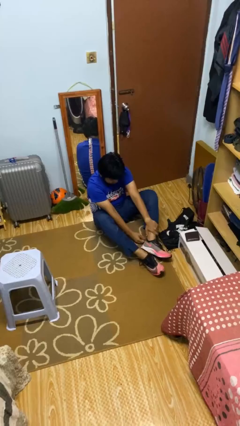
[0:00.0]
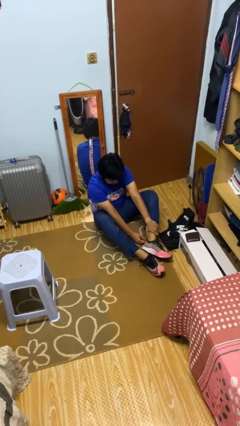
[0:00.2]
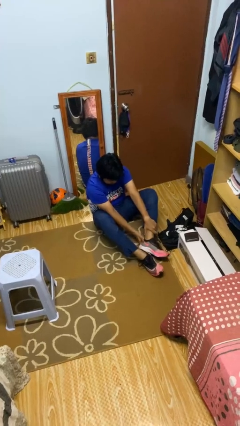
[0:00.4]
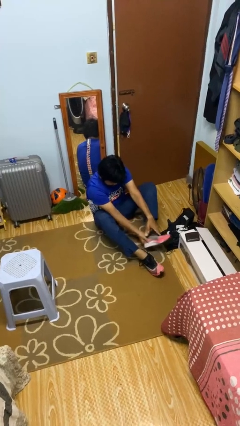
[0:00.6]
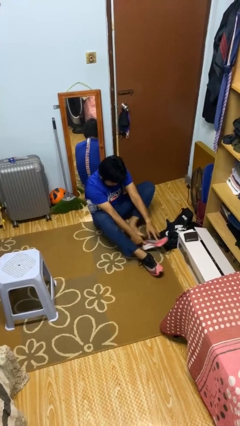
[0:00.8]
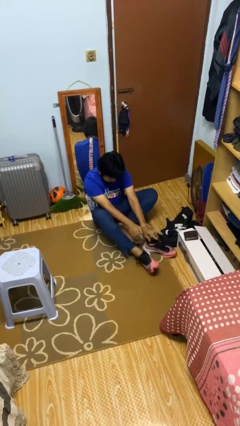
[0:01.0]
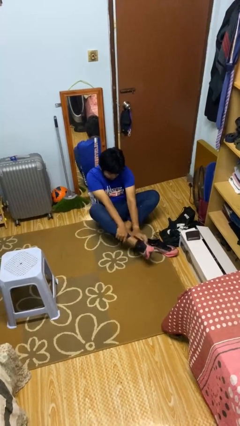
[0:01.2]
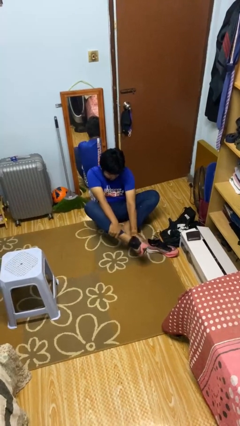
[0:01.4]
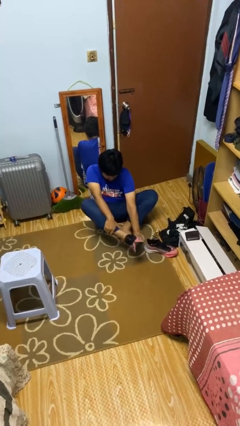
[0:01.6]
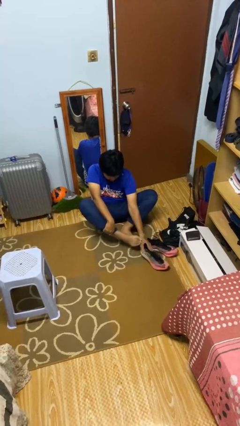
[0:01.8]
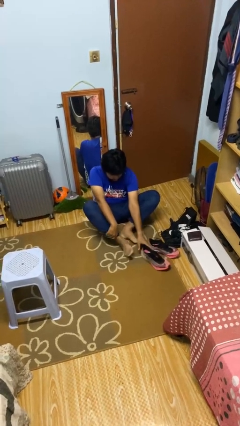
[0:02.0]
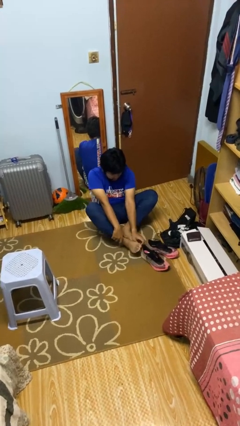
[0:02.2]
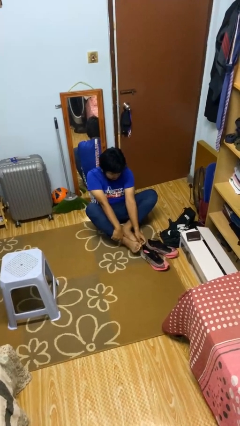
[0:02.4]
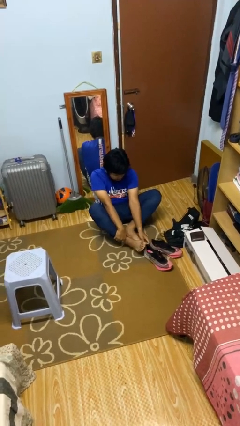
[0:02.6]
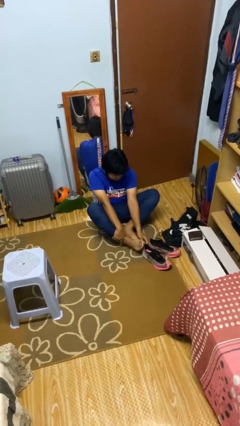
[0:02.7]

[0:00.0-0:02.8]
person takes off shoes

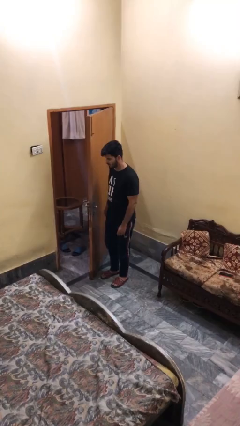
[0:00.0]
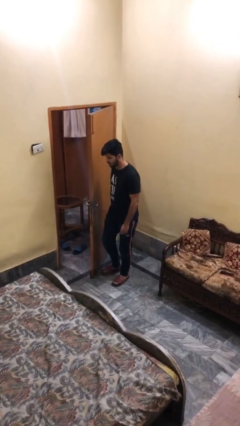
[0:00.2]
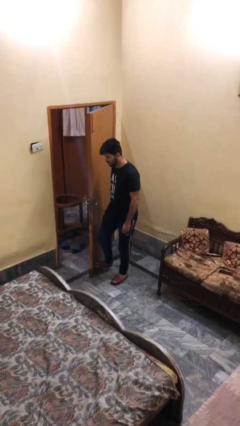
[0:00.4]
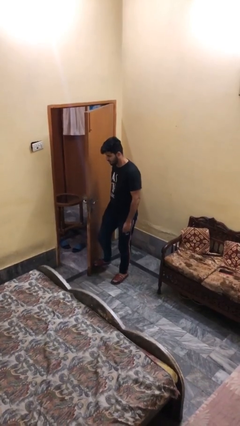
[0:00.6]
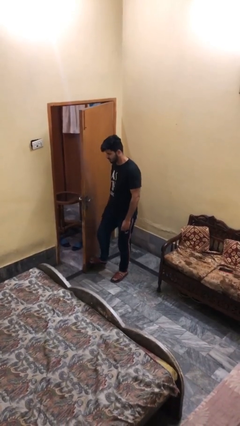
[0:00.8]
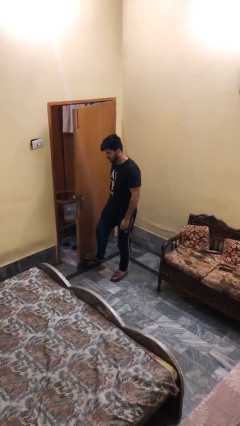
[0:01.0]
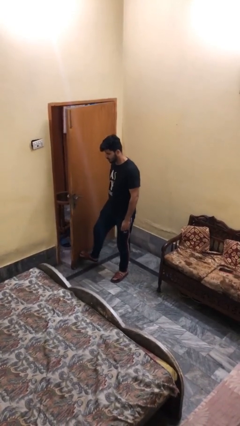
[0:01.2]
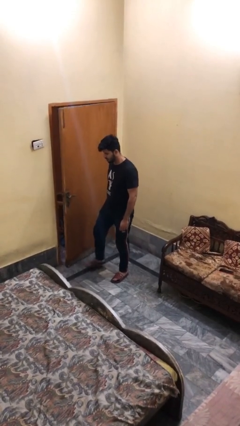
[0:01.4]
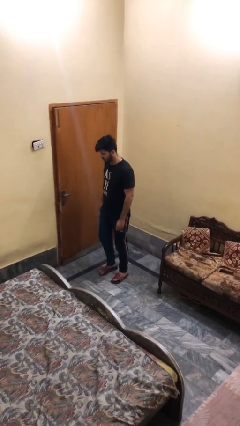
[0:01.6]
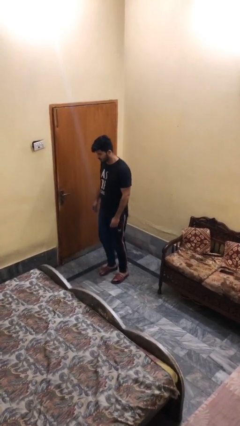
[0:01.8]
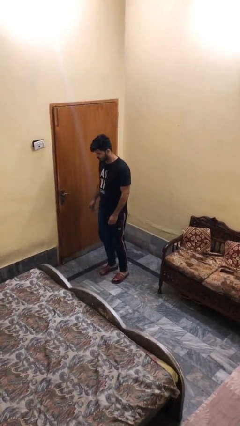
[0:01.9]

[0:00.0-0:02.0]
person closes door with foot

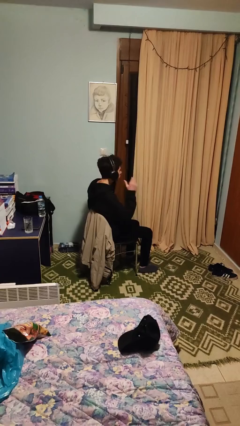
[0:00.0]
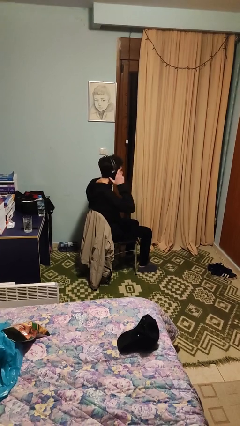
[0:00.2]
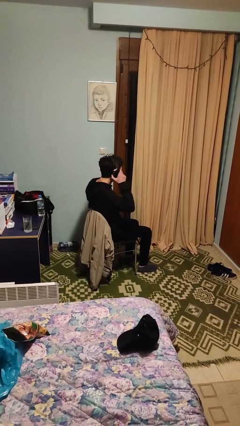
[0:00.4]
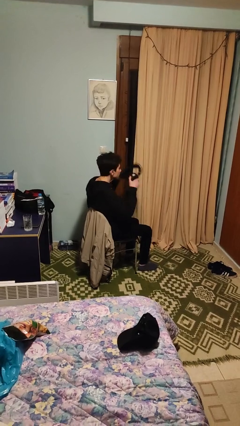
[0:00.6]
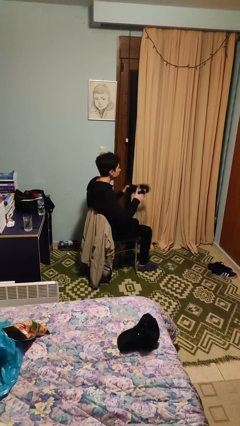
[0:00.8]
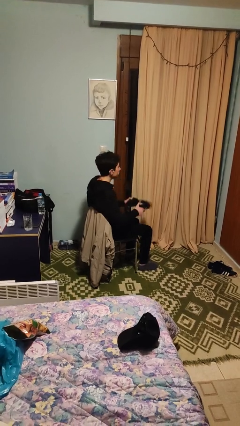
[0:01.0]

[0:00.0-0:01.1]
person takes off headphones

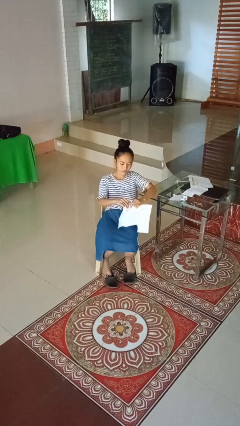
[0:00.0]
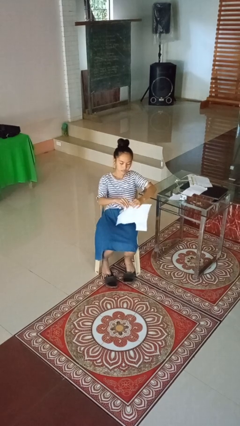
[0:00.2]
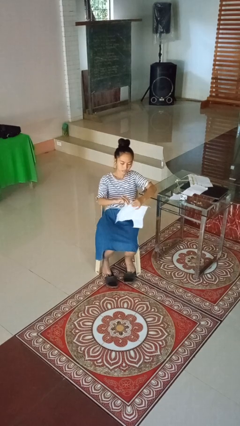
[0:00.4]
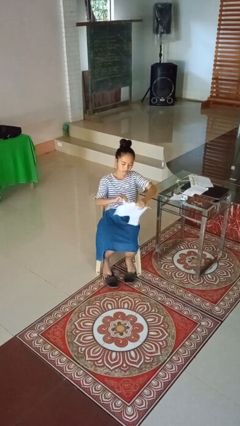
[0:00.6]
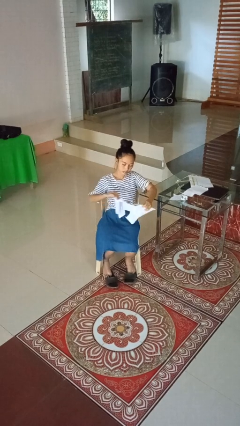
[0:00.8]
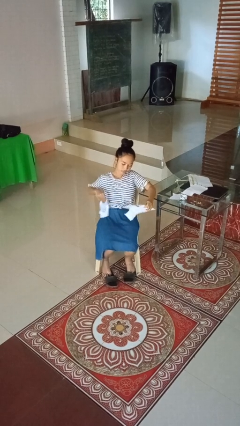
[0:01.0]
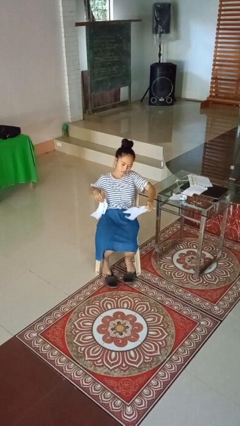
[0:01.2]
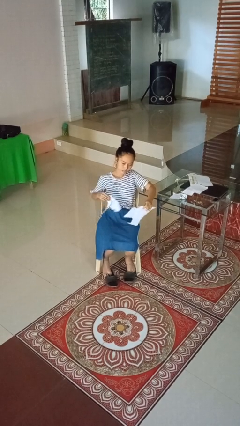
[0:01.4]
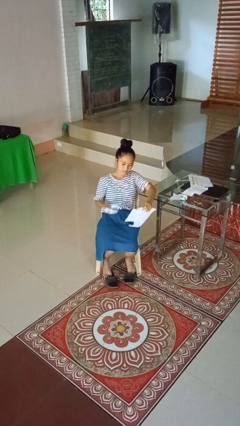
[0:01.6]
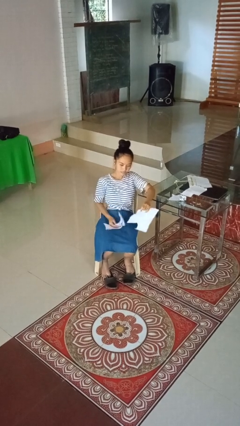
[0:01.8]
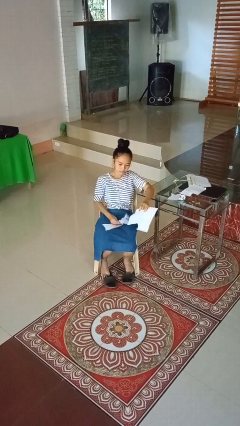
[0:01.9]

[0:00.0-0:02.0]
person tears paper

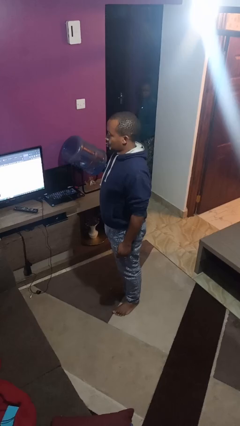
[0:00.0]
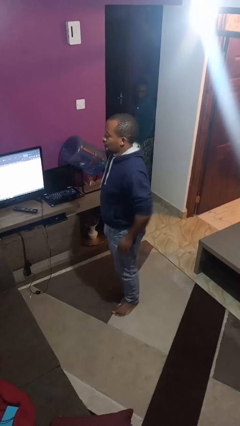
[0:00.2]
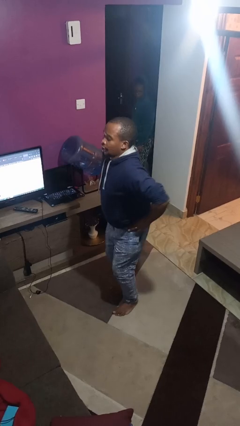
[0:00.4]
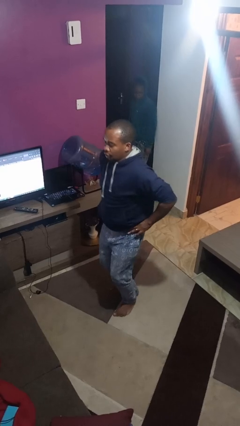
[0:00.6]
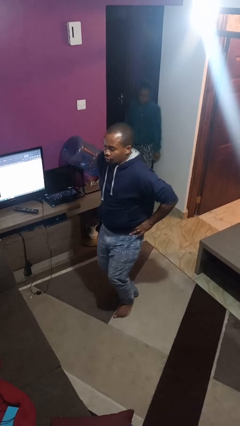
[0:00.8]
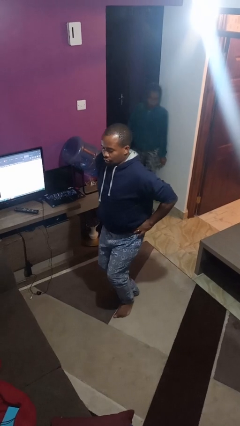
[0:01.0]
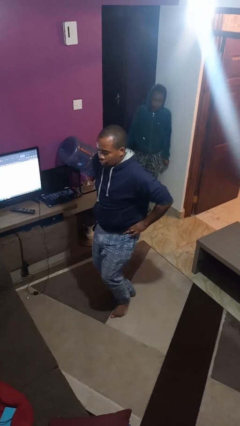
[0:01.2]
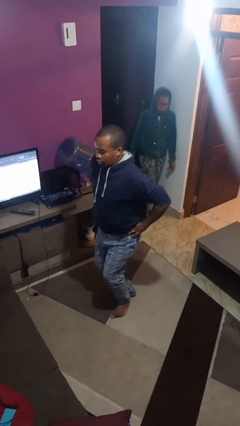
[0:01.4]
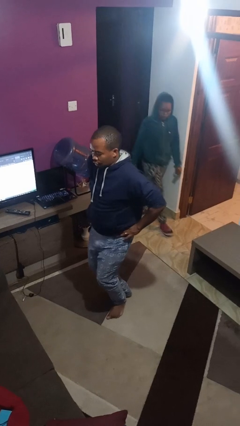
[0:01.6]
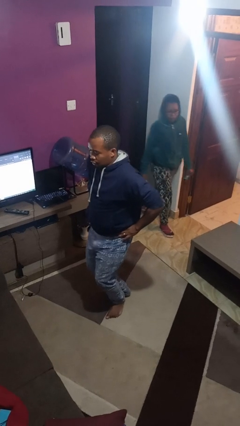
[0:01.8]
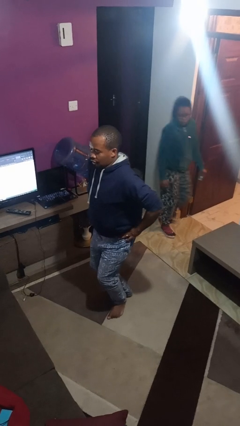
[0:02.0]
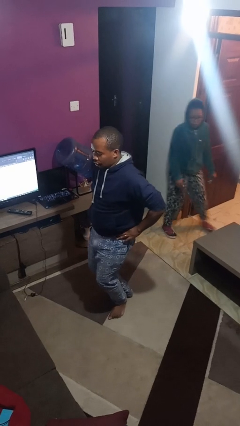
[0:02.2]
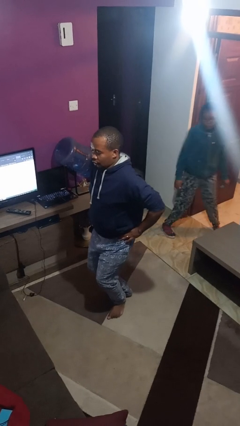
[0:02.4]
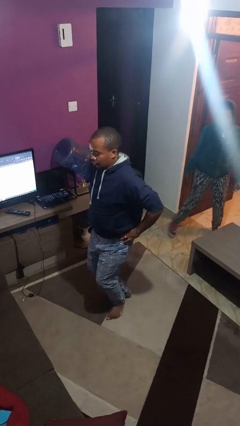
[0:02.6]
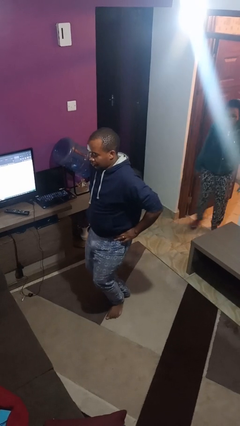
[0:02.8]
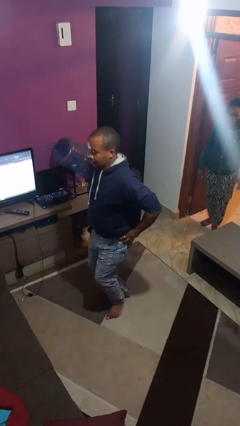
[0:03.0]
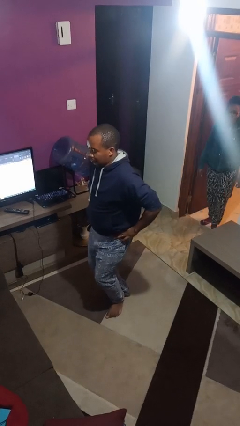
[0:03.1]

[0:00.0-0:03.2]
person wiggles hips

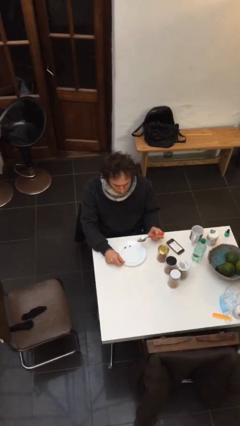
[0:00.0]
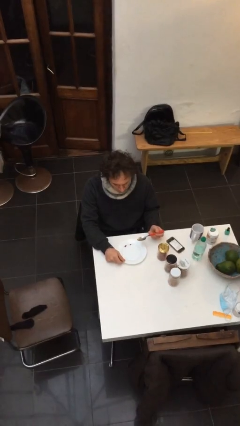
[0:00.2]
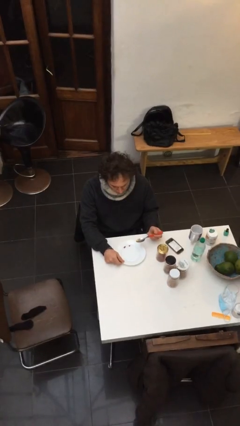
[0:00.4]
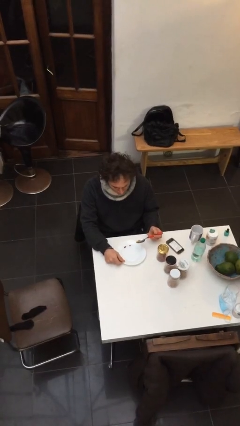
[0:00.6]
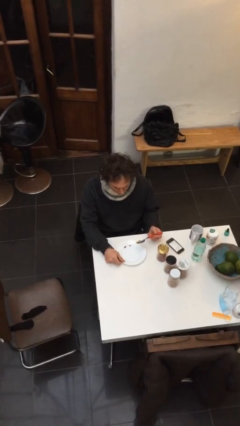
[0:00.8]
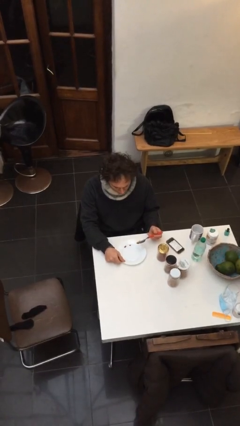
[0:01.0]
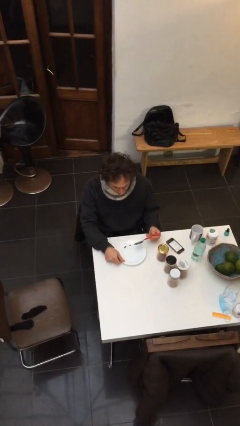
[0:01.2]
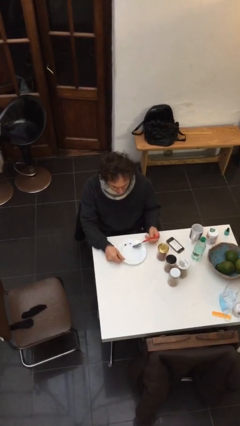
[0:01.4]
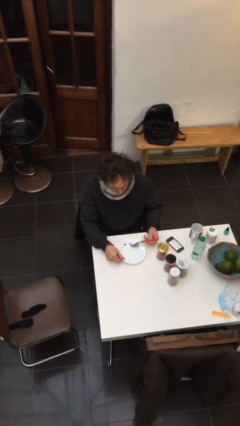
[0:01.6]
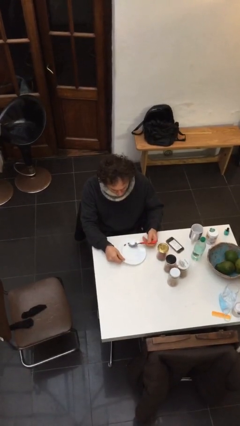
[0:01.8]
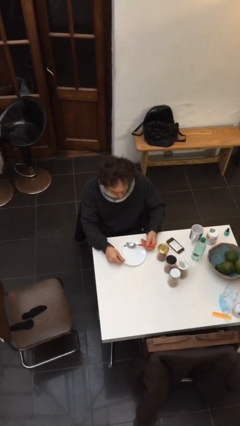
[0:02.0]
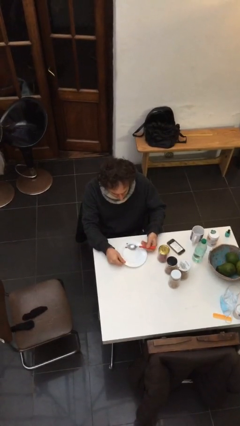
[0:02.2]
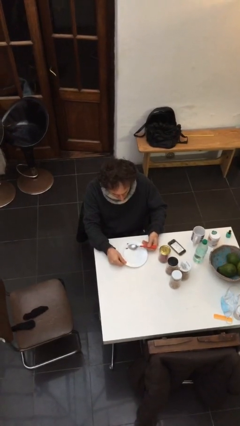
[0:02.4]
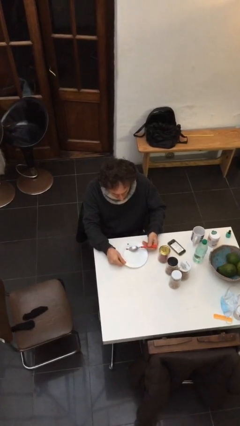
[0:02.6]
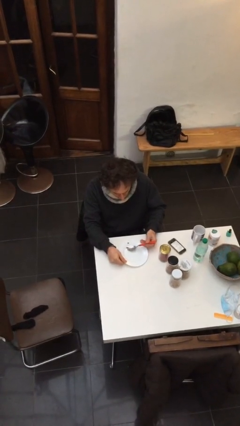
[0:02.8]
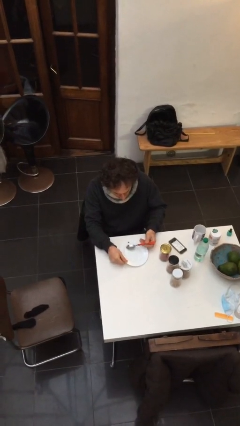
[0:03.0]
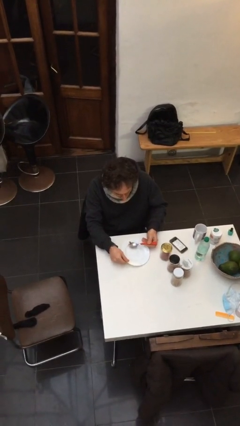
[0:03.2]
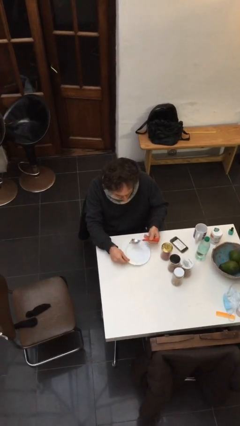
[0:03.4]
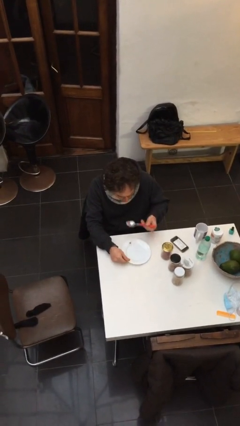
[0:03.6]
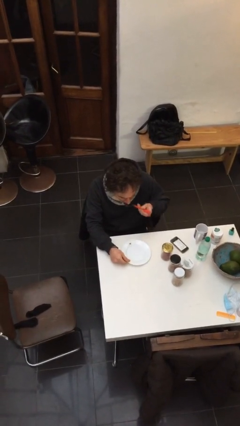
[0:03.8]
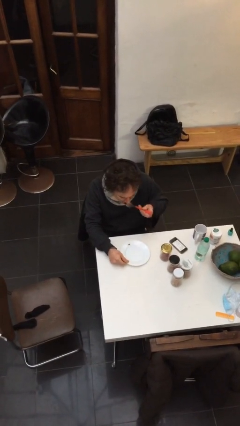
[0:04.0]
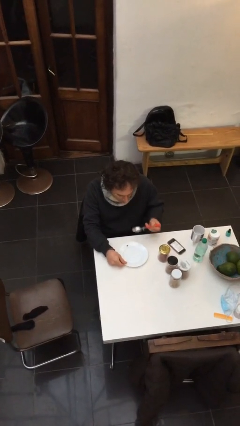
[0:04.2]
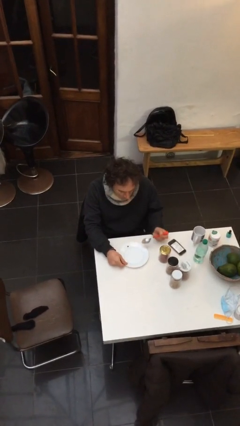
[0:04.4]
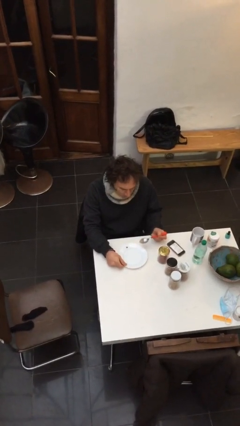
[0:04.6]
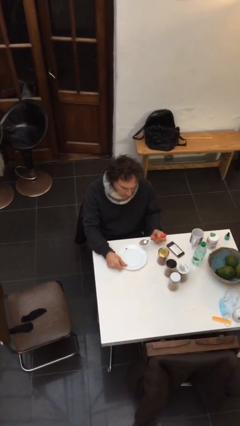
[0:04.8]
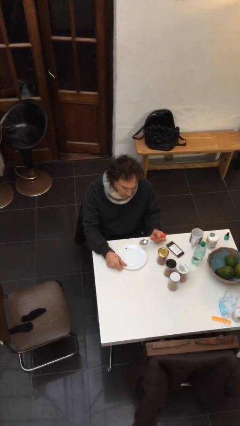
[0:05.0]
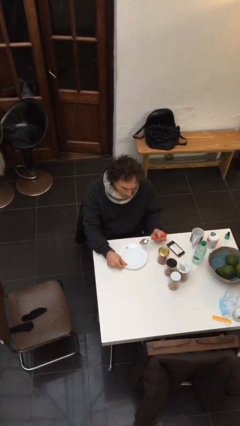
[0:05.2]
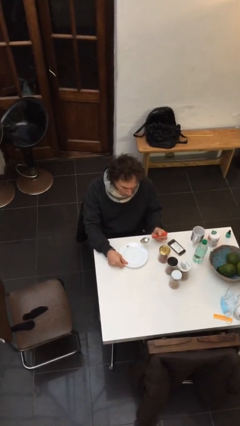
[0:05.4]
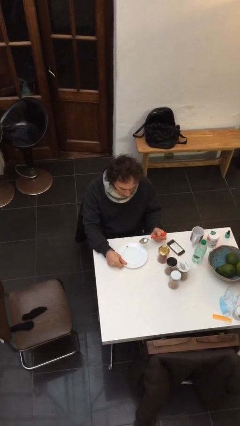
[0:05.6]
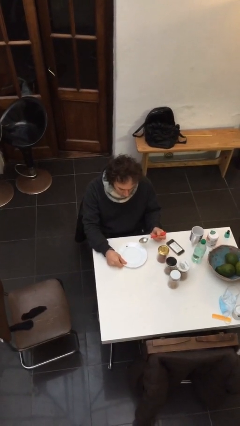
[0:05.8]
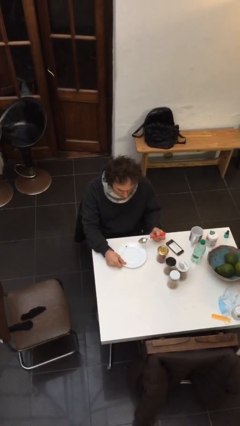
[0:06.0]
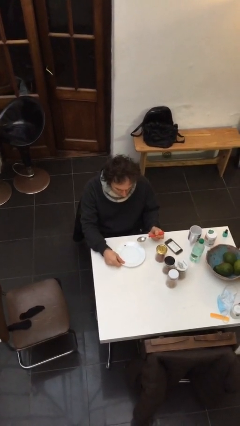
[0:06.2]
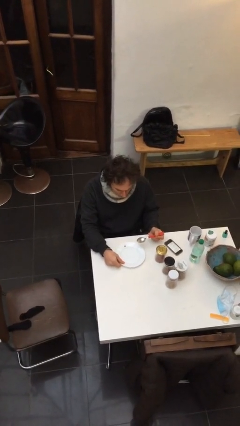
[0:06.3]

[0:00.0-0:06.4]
person eats with utensil
